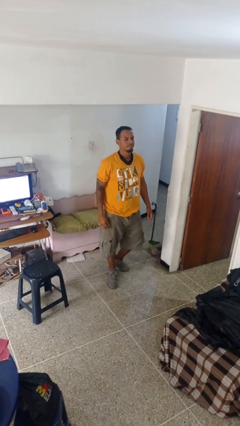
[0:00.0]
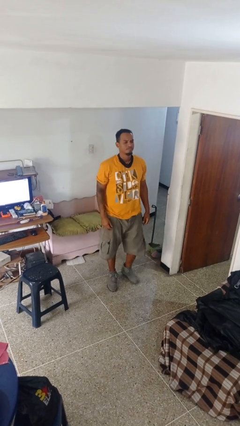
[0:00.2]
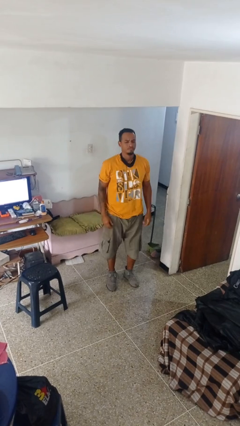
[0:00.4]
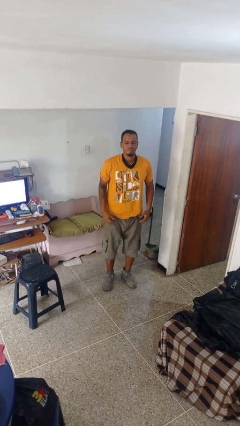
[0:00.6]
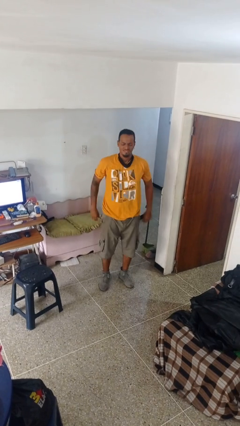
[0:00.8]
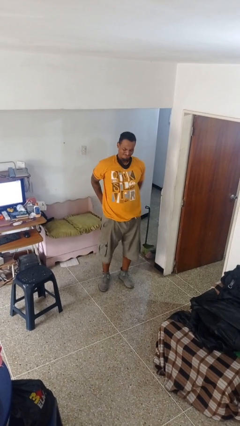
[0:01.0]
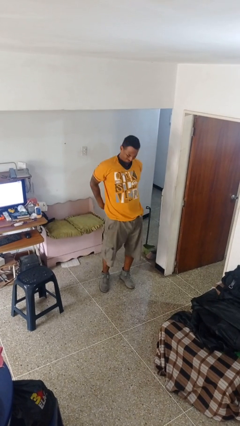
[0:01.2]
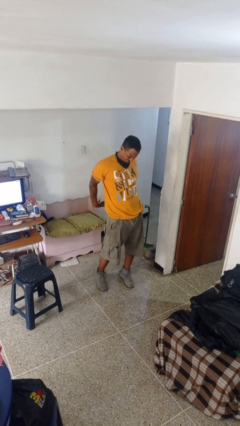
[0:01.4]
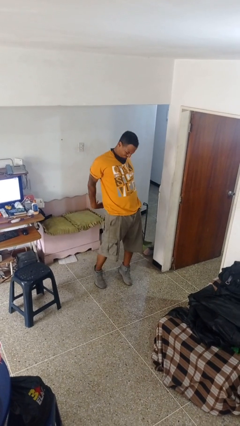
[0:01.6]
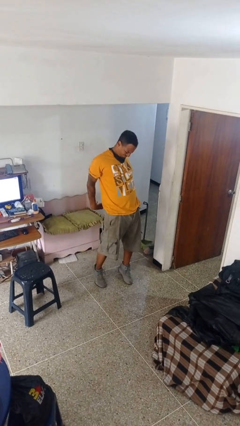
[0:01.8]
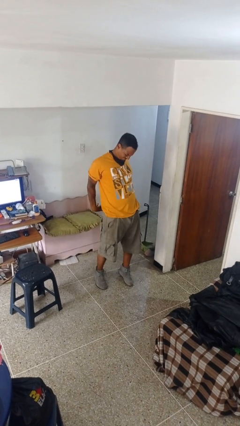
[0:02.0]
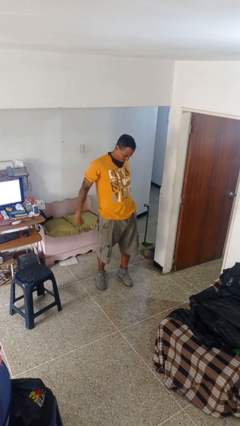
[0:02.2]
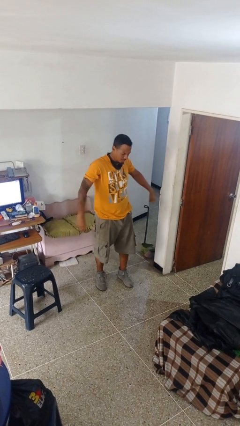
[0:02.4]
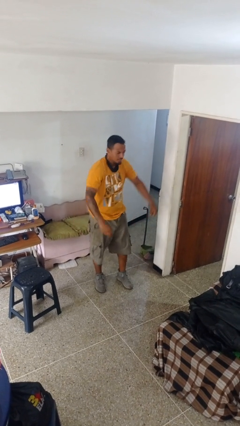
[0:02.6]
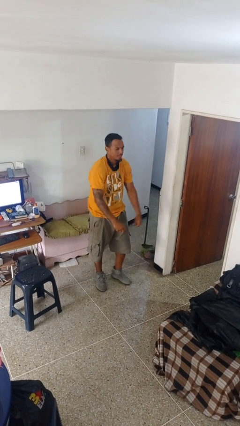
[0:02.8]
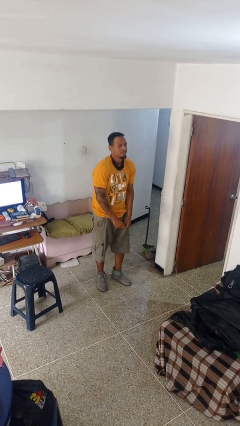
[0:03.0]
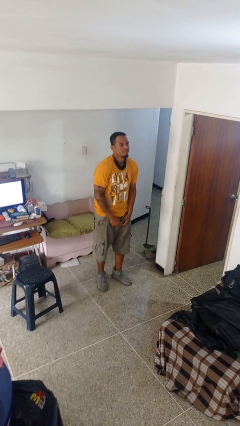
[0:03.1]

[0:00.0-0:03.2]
person stretches back

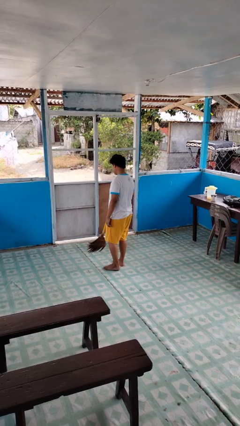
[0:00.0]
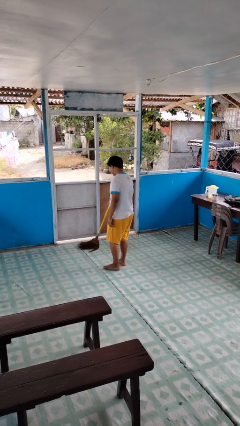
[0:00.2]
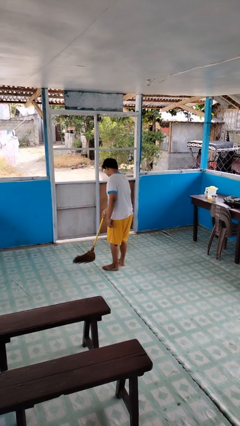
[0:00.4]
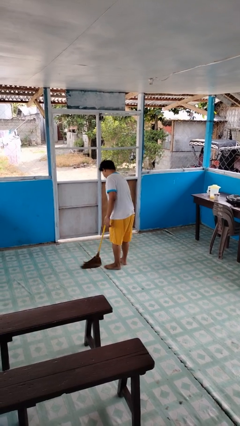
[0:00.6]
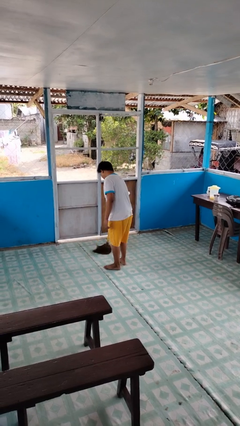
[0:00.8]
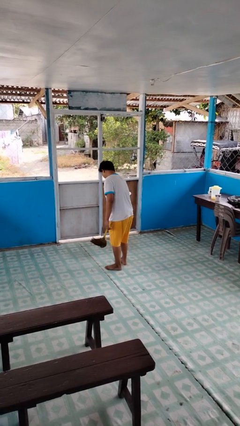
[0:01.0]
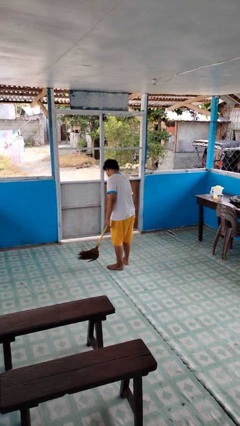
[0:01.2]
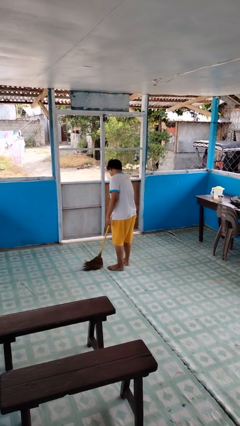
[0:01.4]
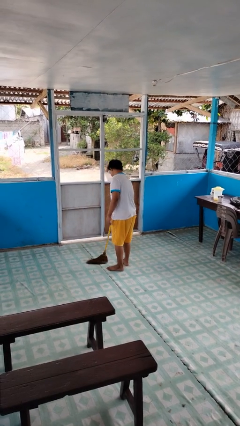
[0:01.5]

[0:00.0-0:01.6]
person sweeps floor

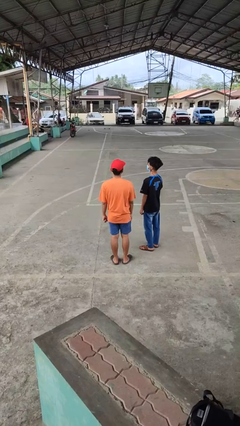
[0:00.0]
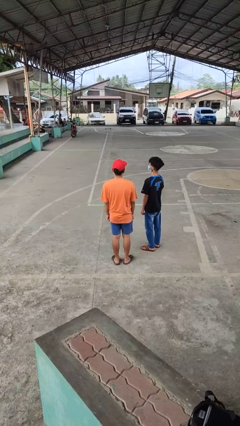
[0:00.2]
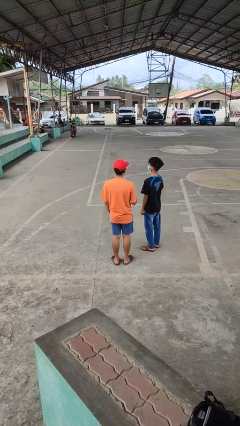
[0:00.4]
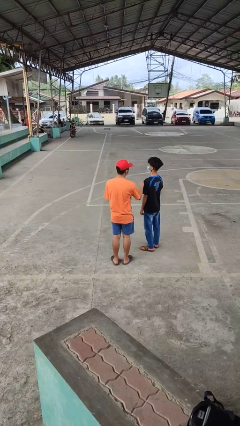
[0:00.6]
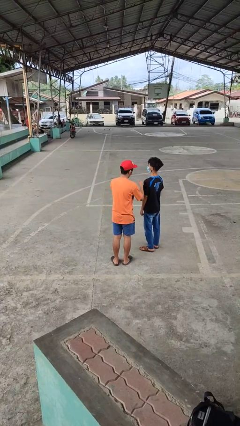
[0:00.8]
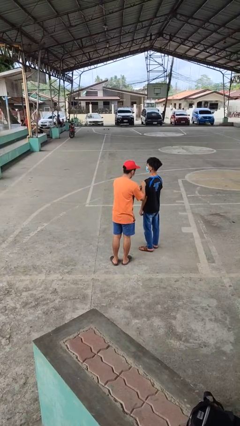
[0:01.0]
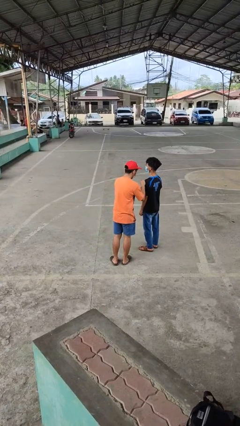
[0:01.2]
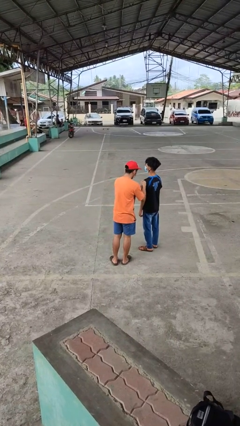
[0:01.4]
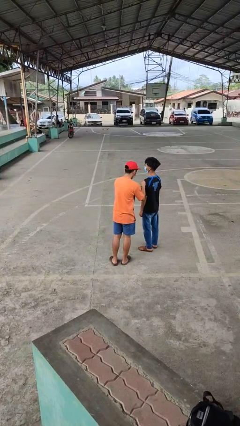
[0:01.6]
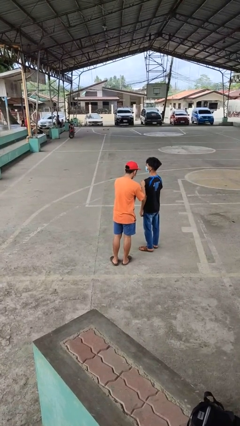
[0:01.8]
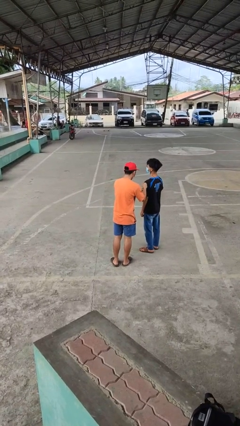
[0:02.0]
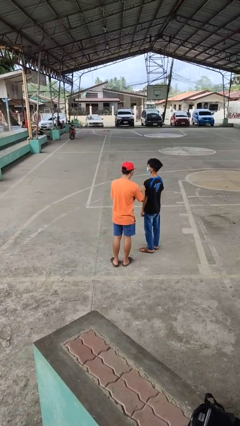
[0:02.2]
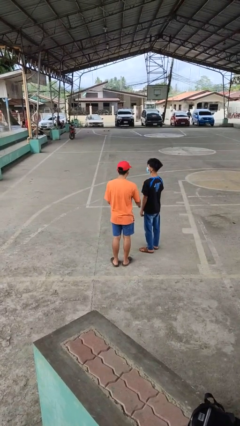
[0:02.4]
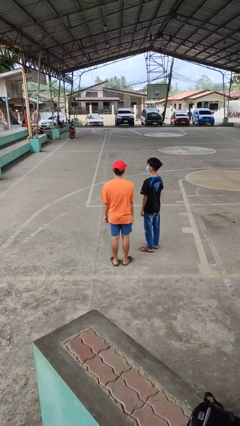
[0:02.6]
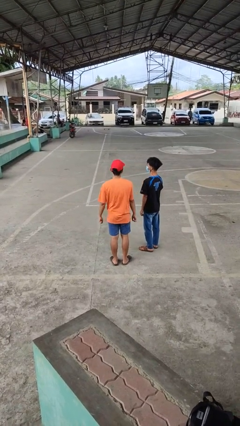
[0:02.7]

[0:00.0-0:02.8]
person pounds shoulders of person

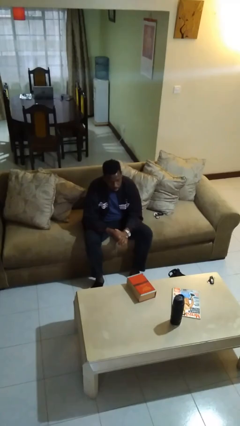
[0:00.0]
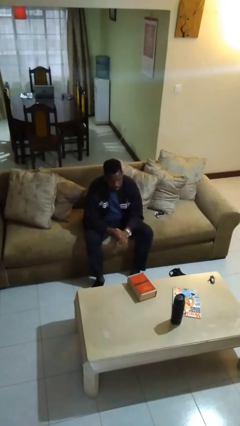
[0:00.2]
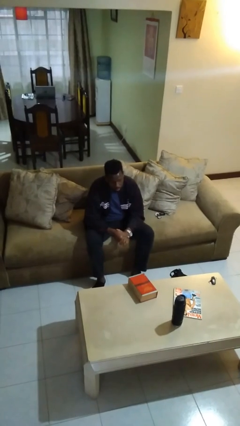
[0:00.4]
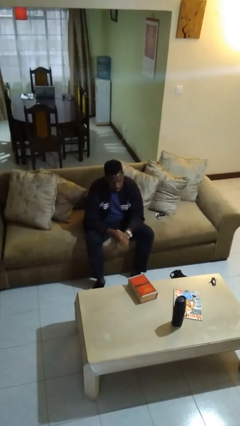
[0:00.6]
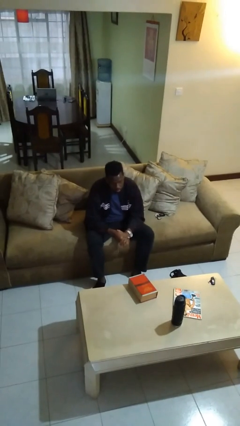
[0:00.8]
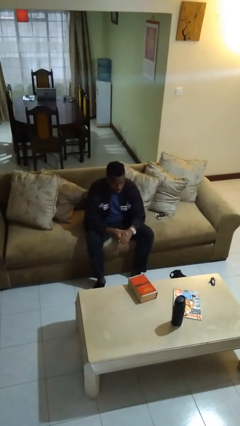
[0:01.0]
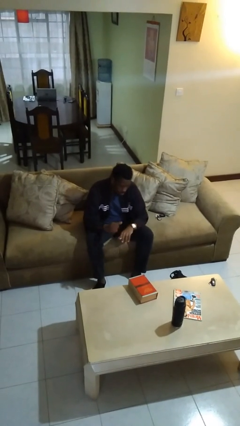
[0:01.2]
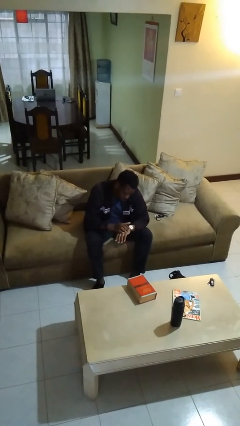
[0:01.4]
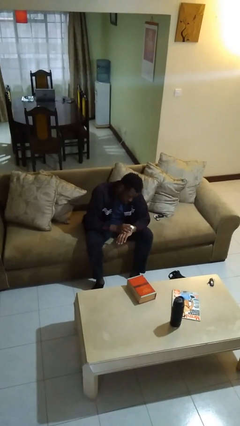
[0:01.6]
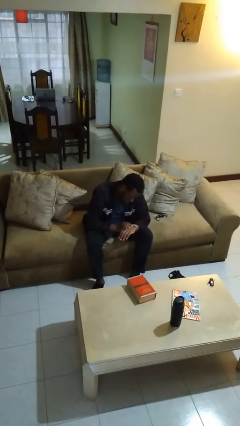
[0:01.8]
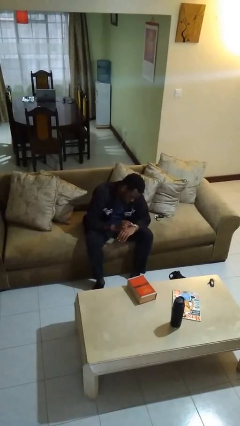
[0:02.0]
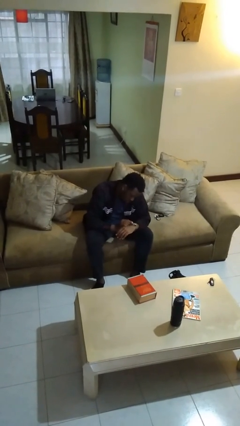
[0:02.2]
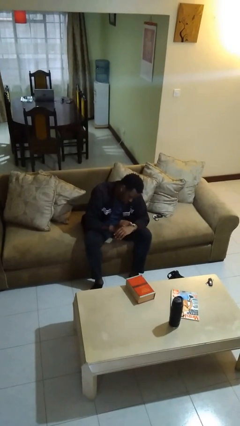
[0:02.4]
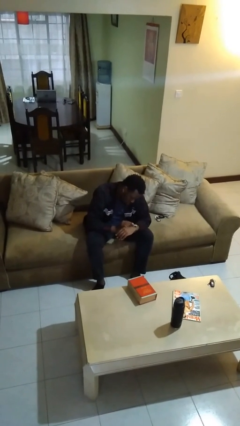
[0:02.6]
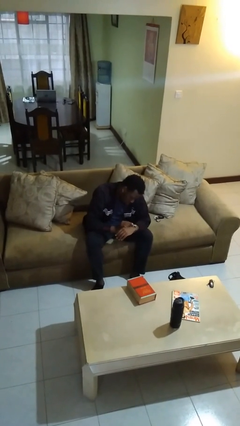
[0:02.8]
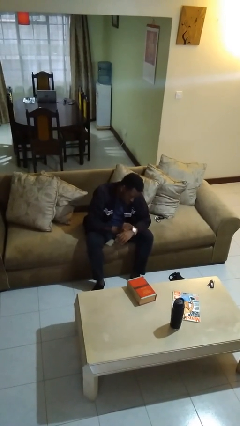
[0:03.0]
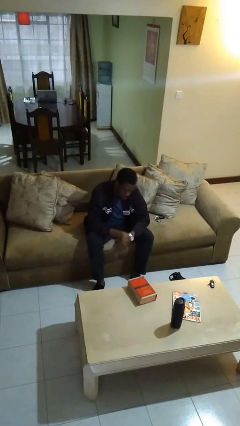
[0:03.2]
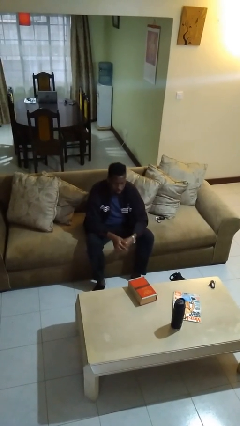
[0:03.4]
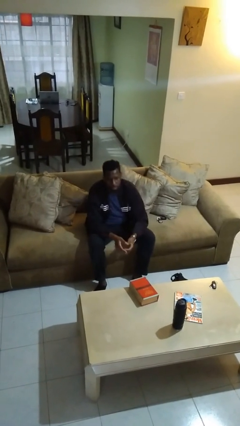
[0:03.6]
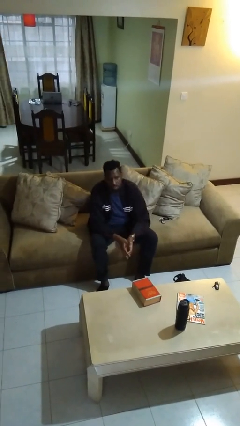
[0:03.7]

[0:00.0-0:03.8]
person looks at wristwatch

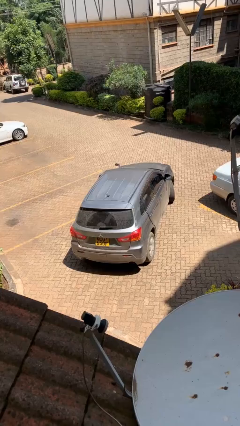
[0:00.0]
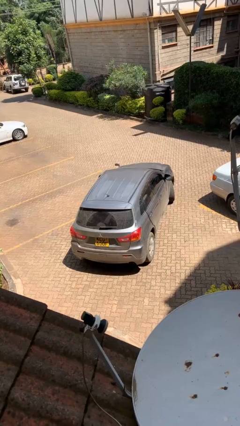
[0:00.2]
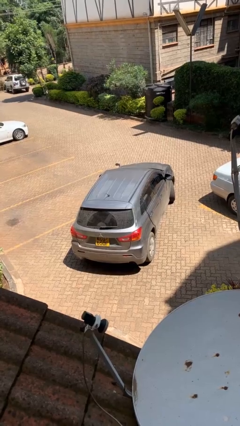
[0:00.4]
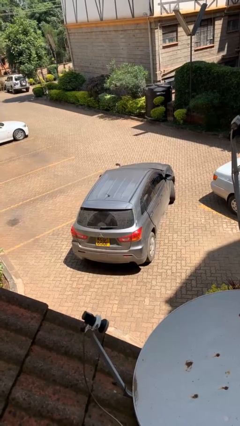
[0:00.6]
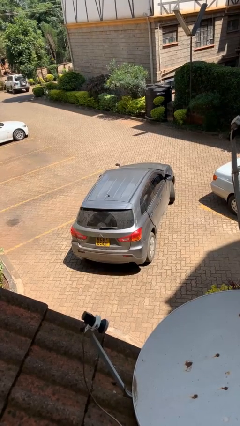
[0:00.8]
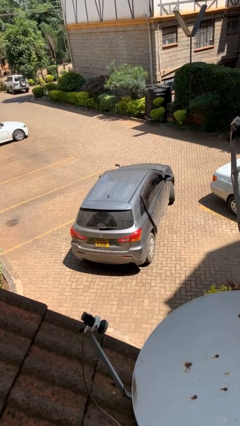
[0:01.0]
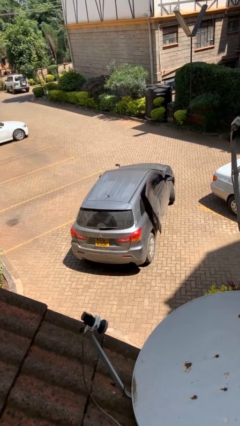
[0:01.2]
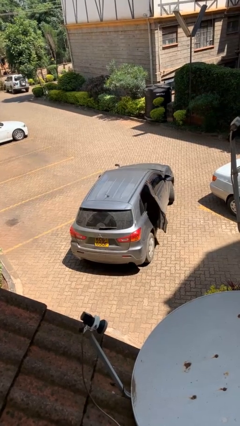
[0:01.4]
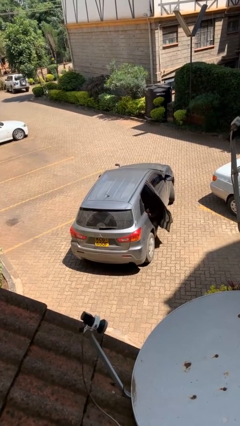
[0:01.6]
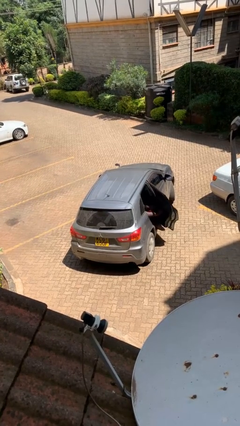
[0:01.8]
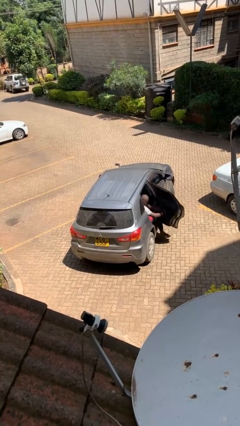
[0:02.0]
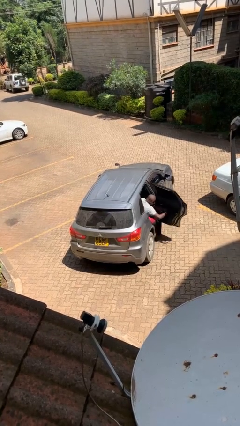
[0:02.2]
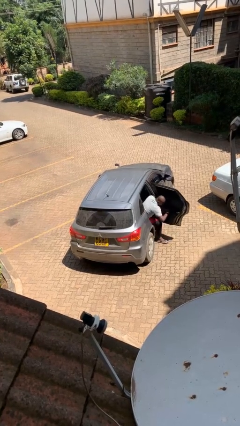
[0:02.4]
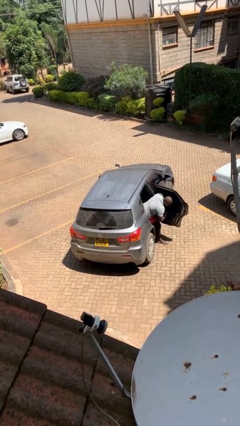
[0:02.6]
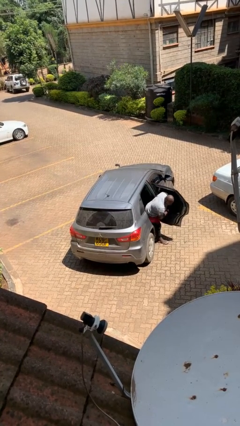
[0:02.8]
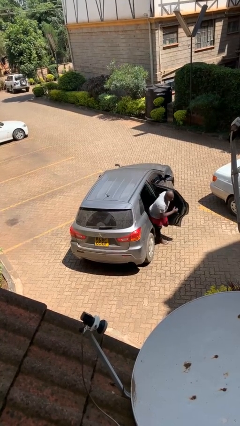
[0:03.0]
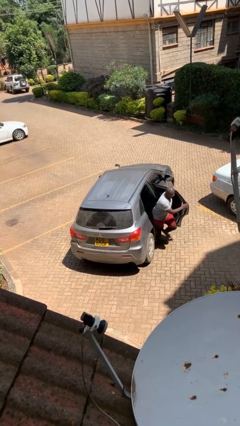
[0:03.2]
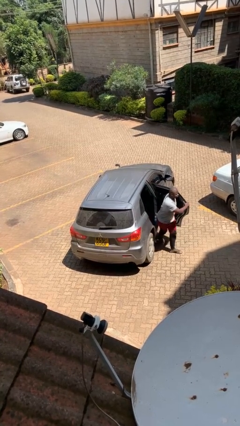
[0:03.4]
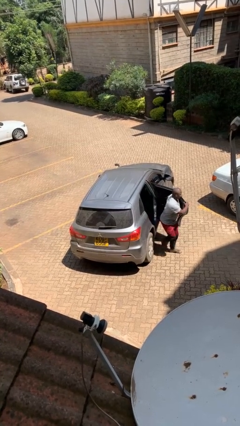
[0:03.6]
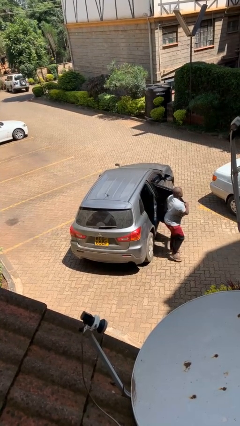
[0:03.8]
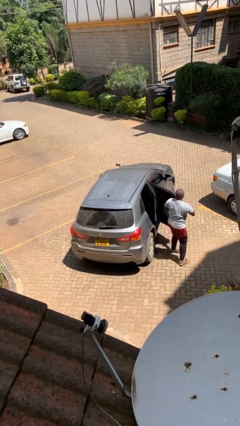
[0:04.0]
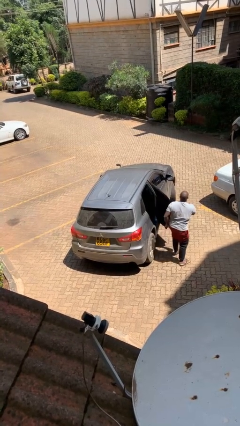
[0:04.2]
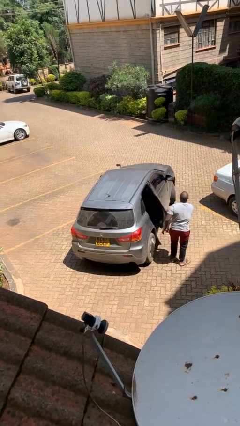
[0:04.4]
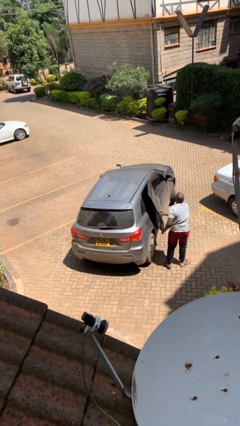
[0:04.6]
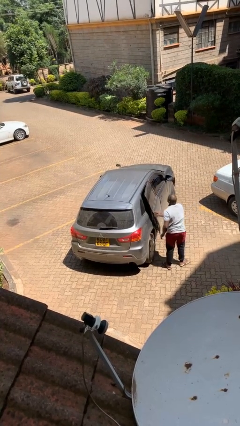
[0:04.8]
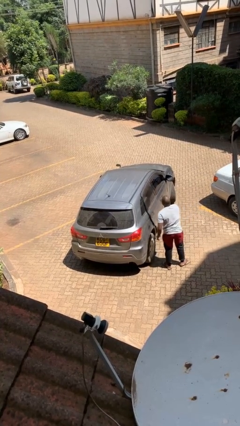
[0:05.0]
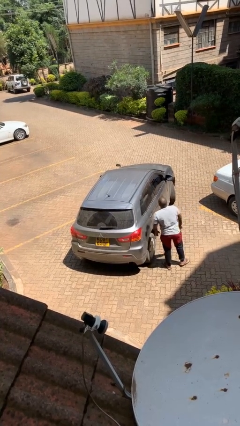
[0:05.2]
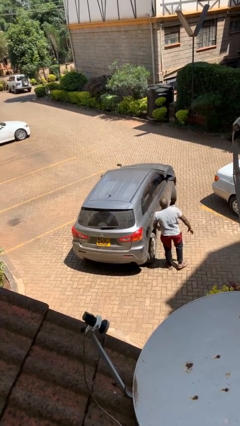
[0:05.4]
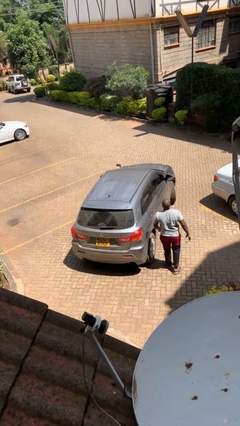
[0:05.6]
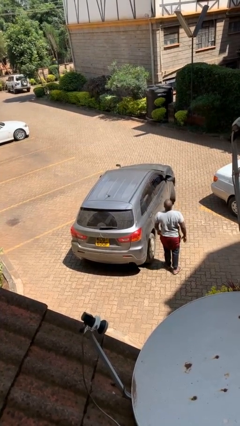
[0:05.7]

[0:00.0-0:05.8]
car drops off person

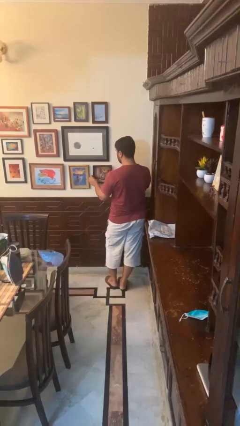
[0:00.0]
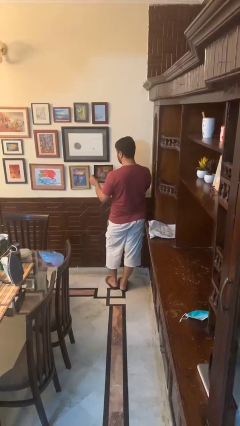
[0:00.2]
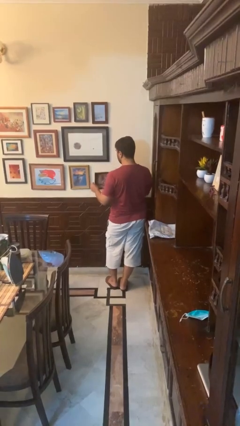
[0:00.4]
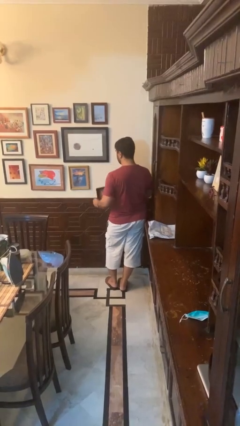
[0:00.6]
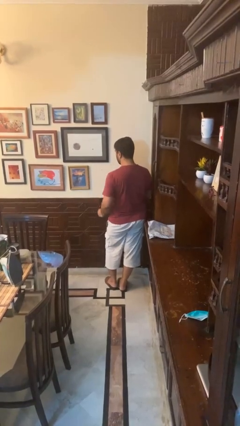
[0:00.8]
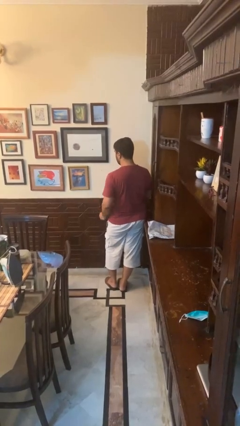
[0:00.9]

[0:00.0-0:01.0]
person takes down picture frame
